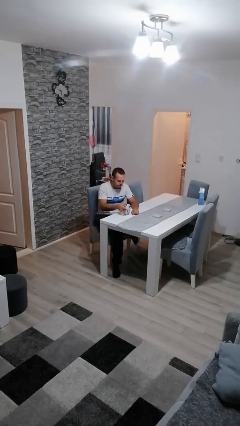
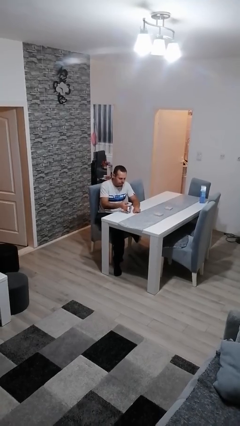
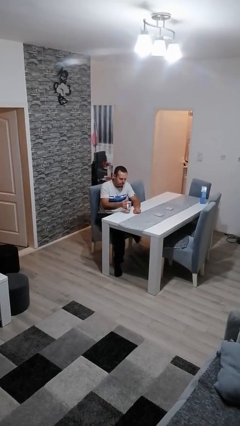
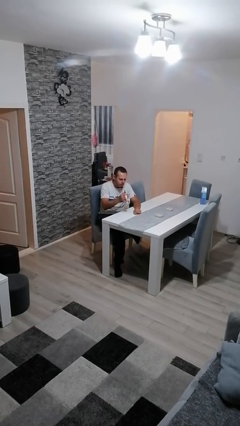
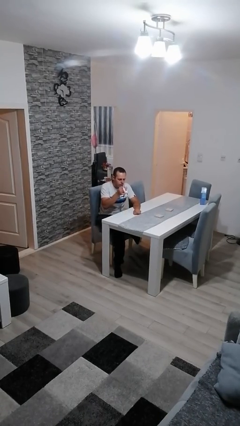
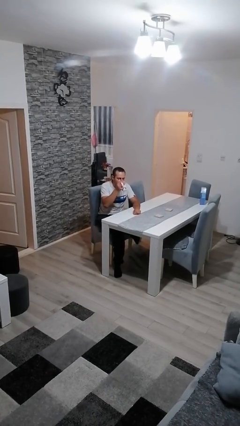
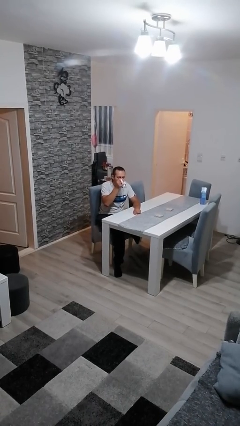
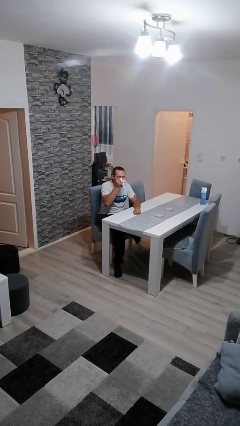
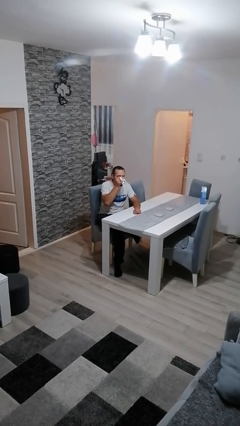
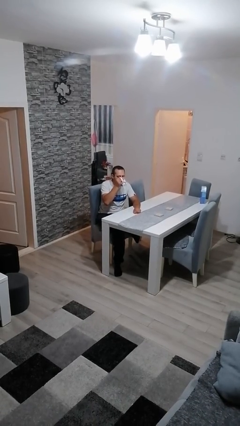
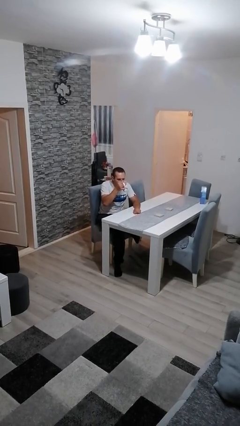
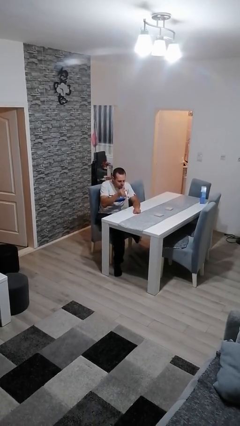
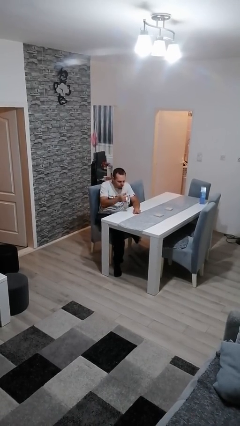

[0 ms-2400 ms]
person drinks from mug

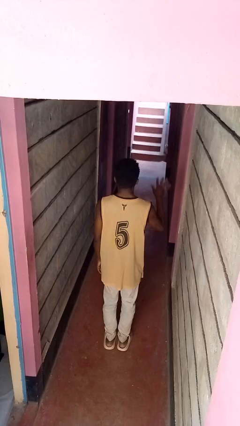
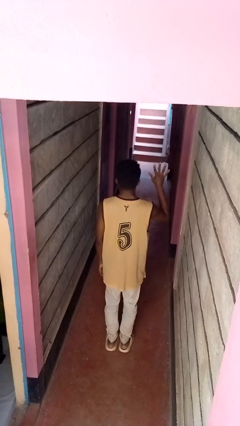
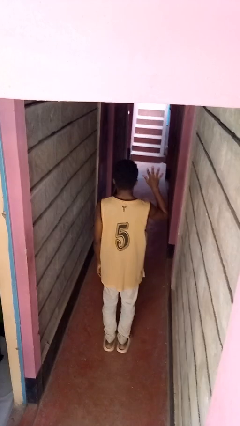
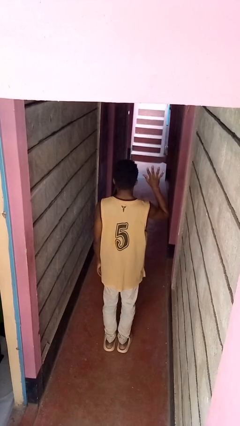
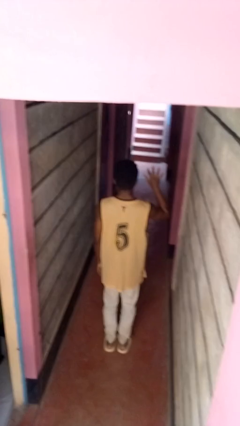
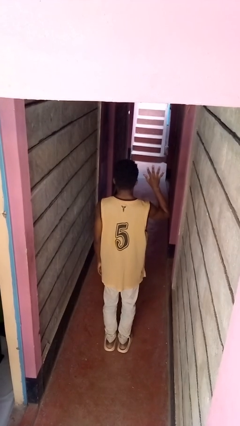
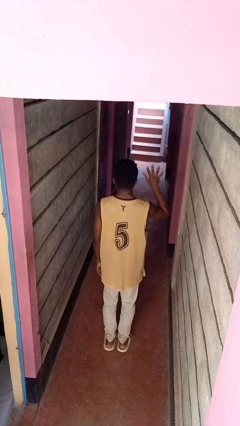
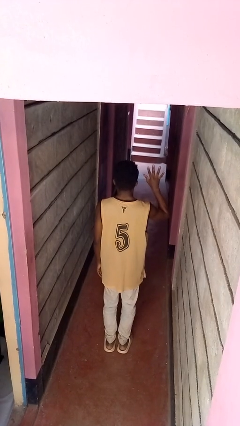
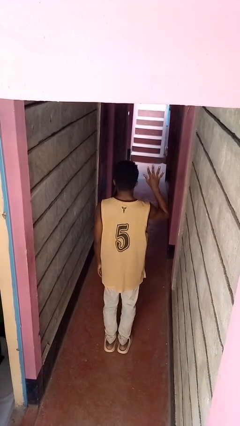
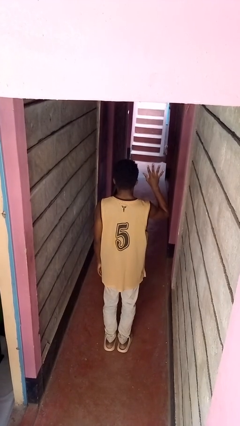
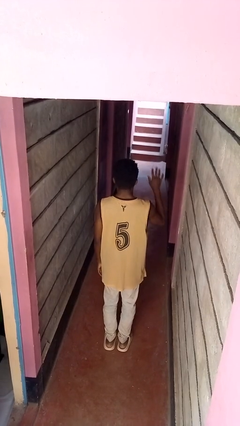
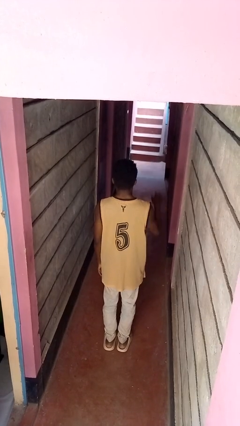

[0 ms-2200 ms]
person gestures number five

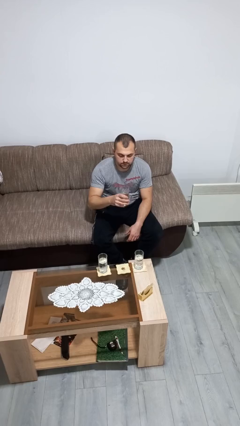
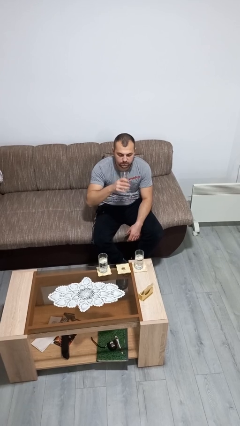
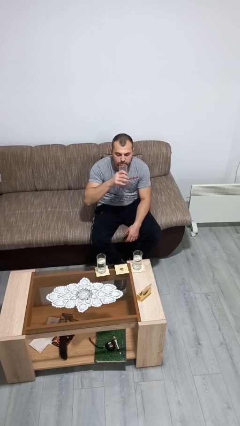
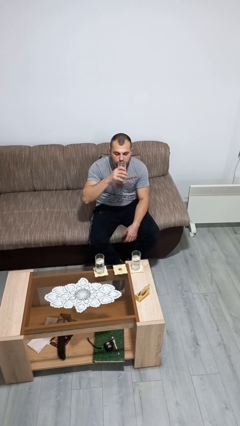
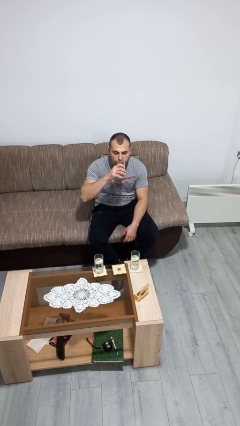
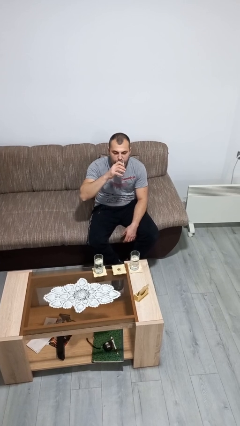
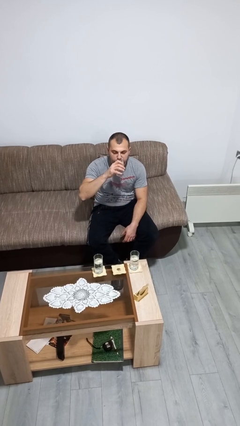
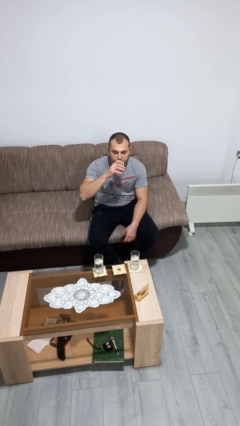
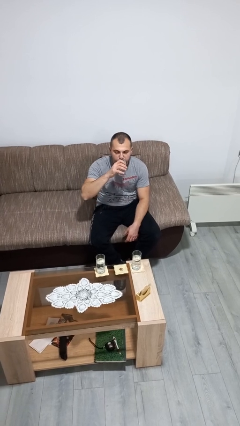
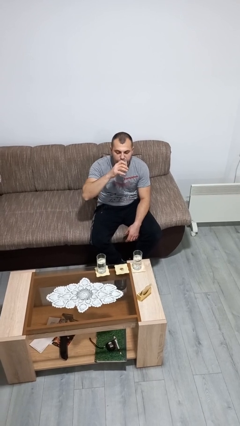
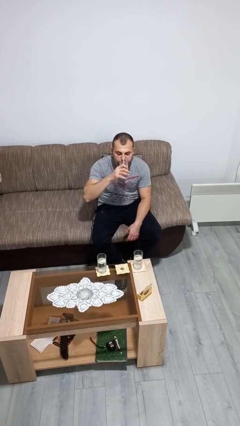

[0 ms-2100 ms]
person drinks from shotglass

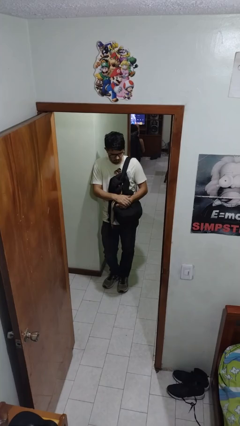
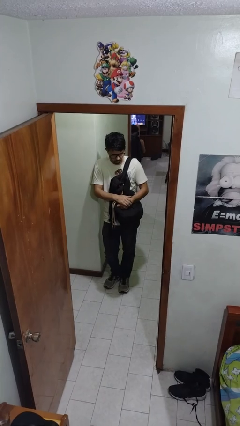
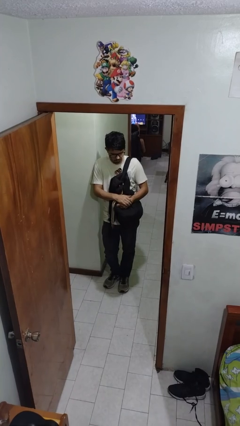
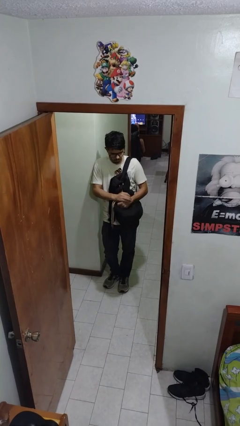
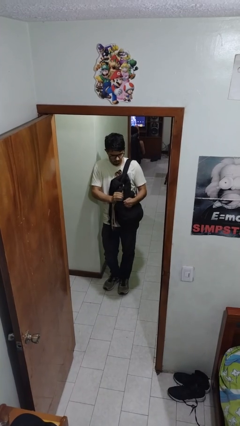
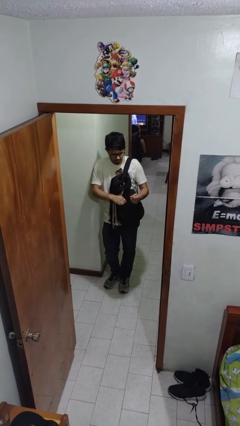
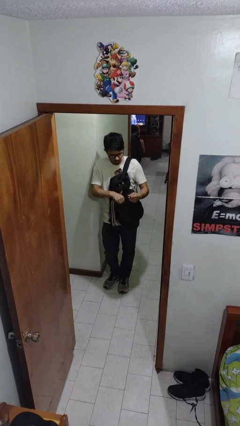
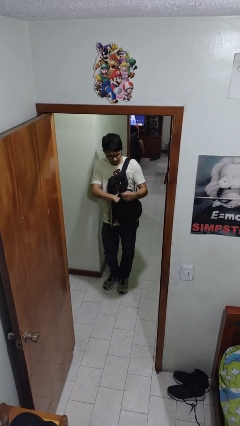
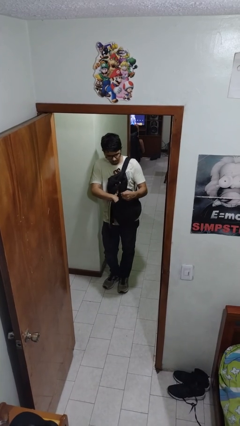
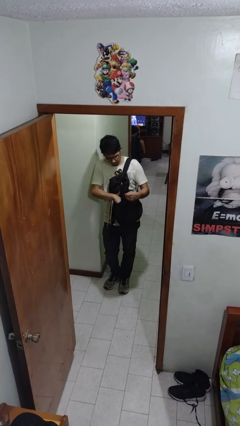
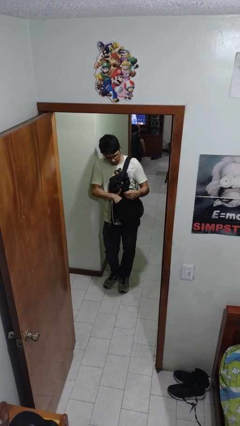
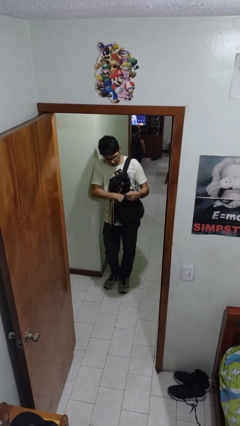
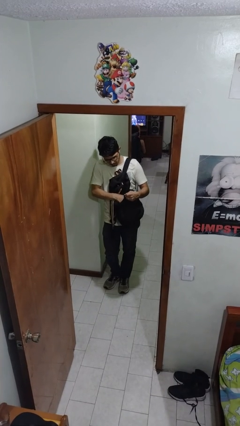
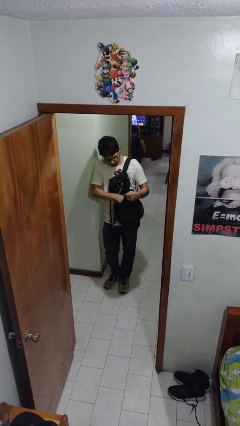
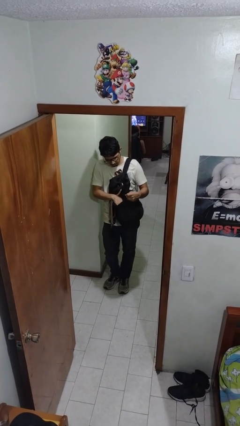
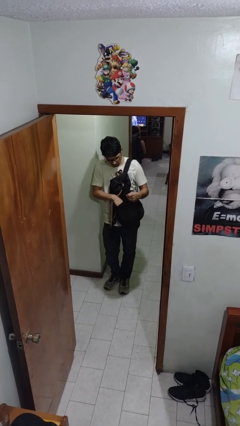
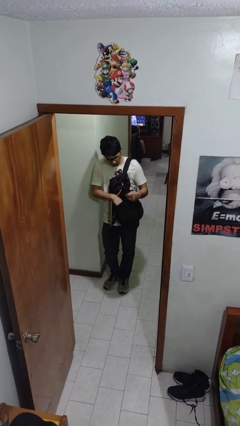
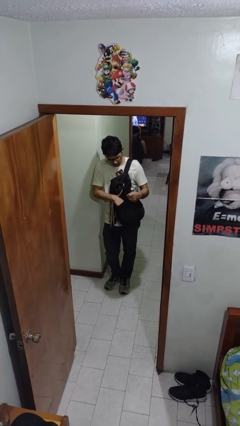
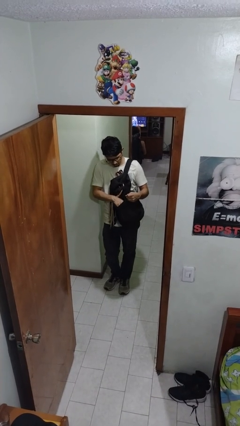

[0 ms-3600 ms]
person searches in backpack

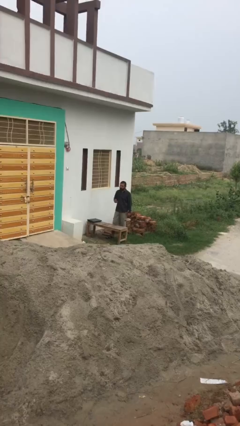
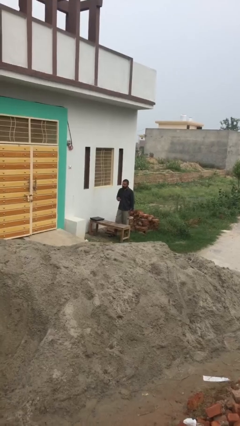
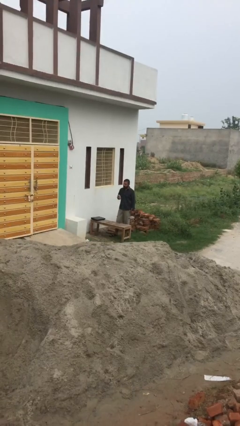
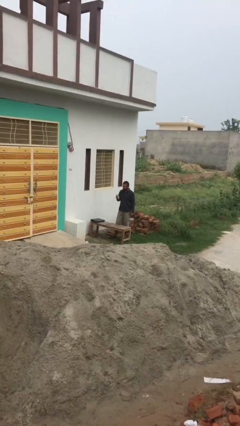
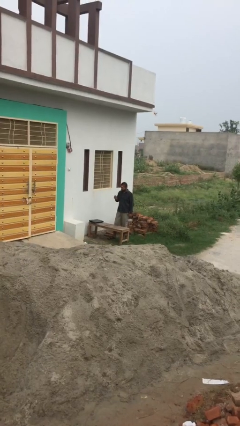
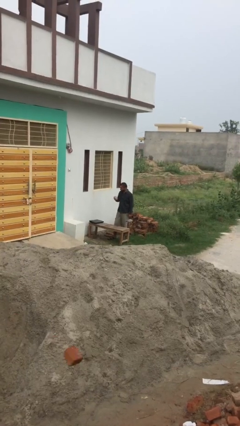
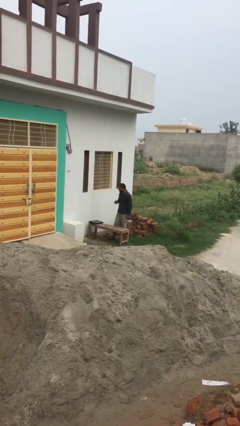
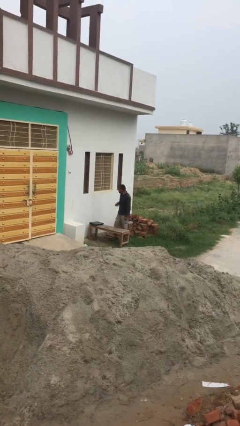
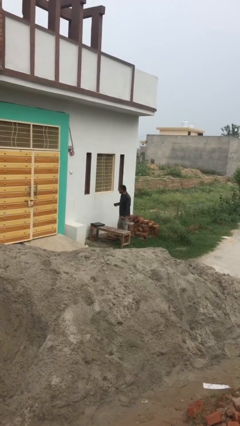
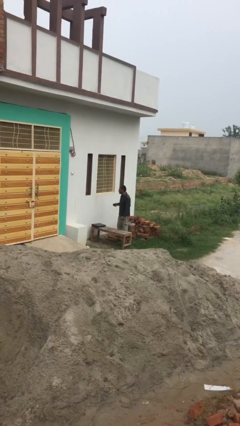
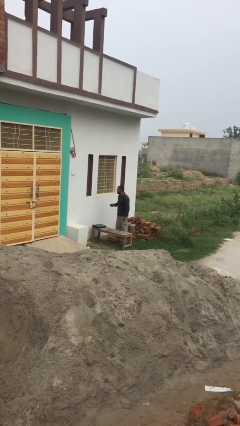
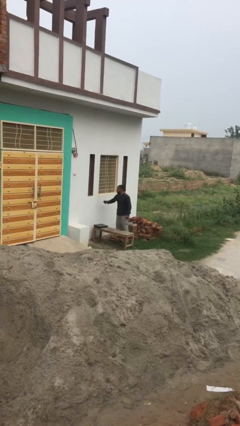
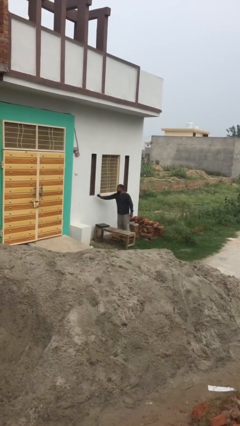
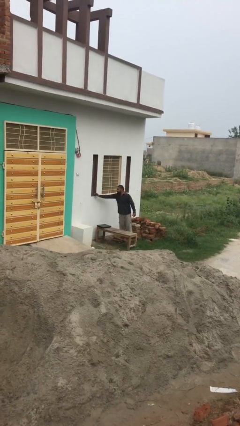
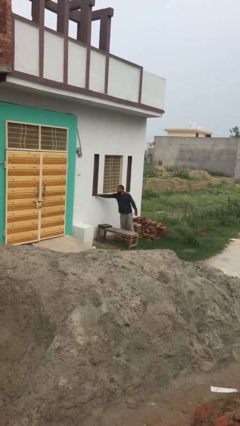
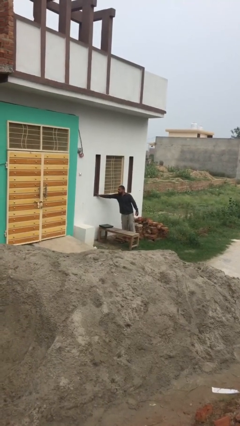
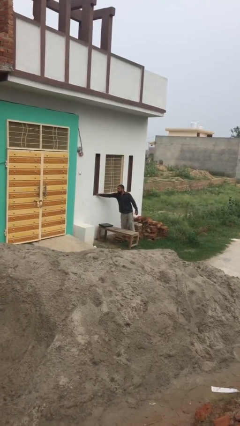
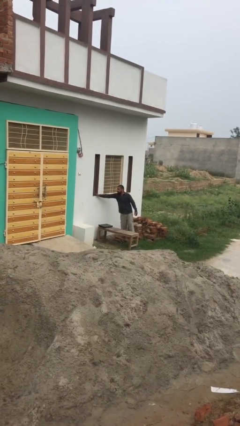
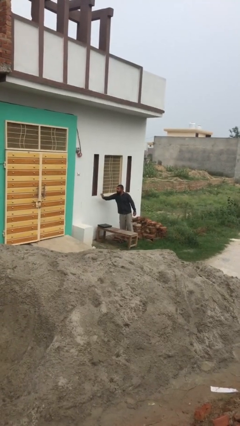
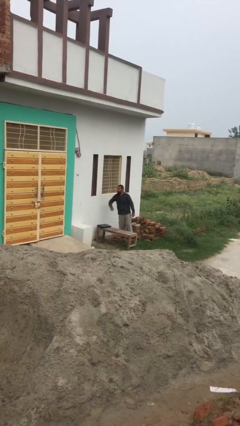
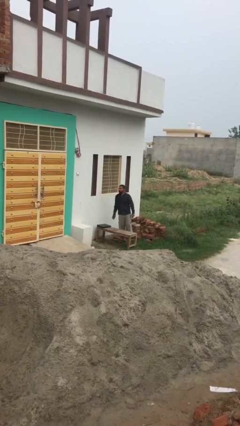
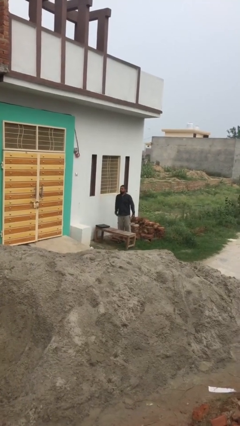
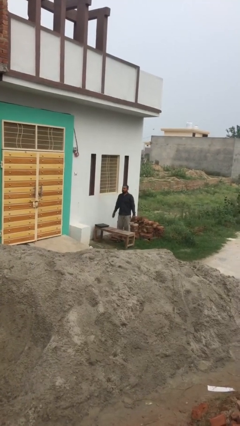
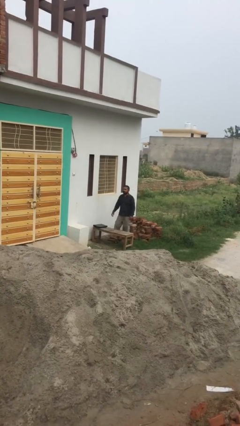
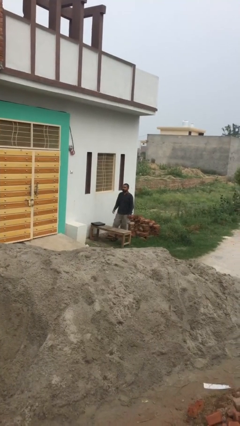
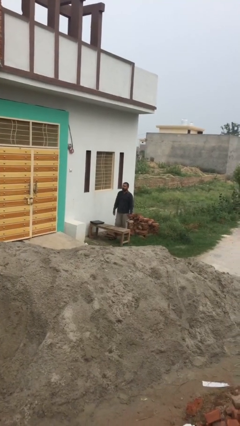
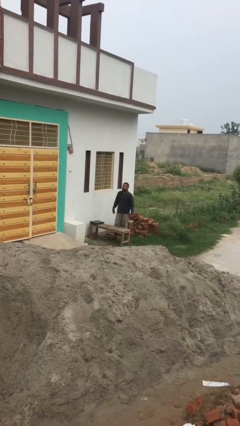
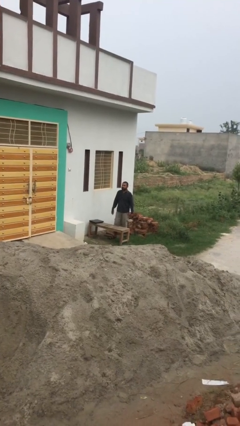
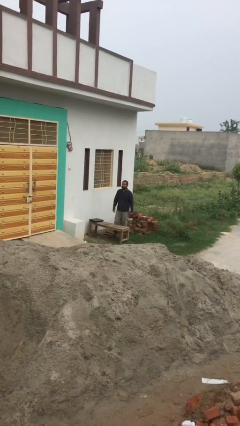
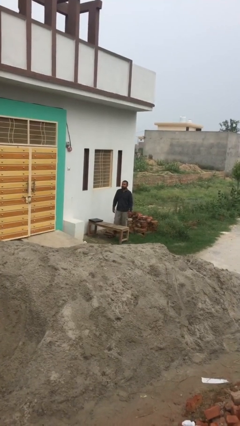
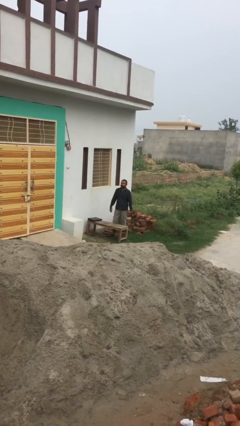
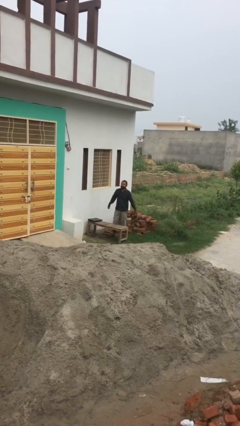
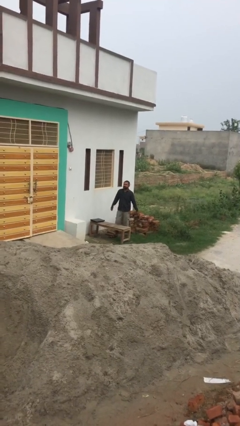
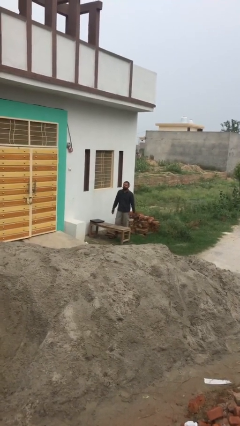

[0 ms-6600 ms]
person puts down object on shelf

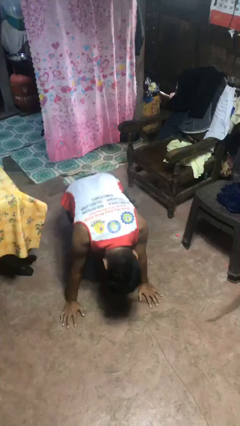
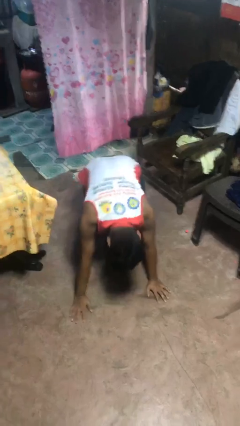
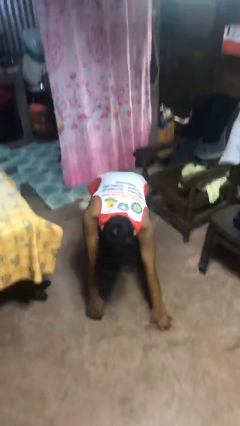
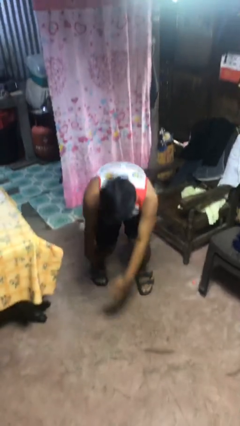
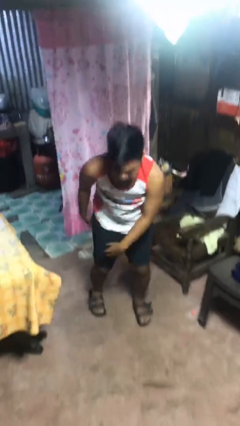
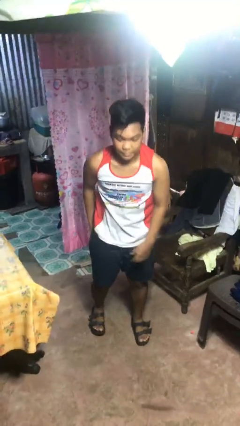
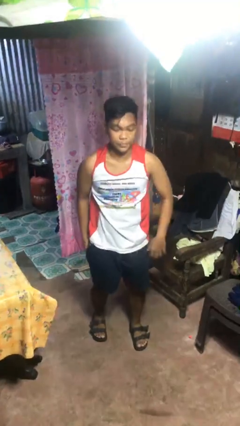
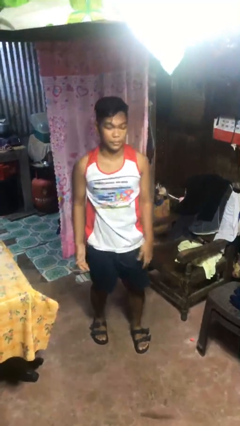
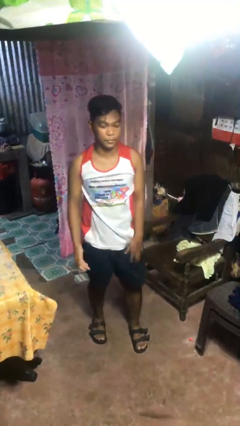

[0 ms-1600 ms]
person stands up from floor
